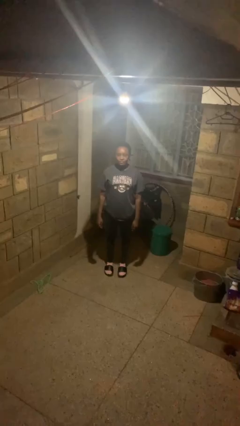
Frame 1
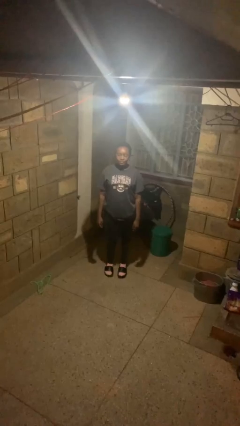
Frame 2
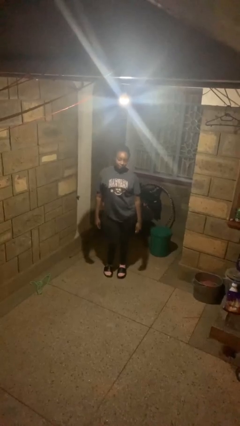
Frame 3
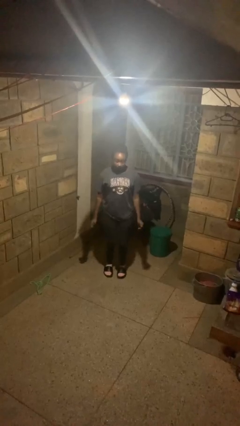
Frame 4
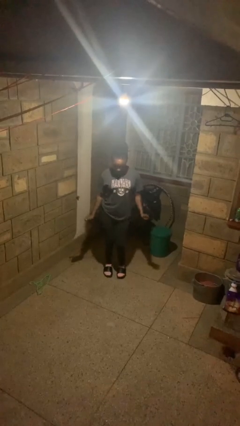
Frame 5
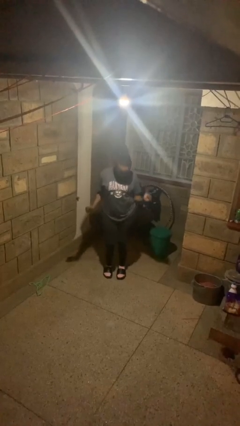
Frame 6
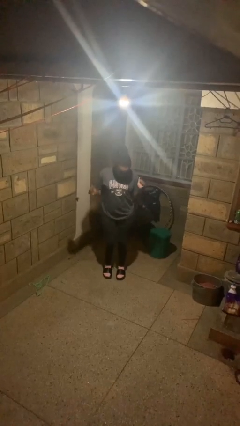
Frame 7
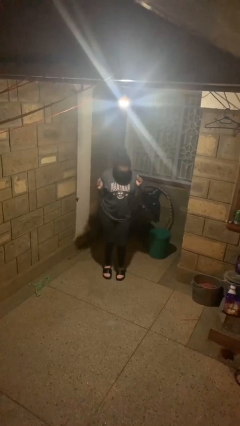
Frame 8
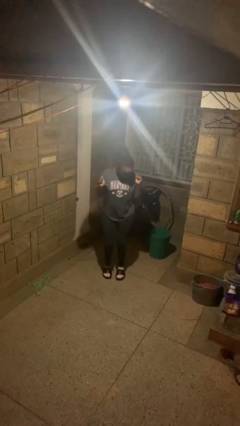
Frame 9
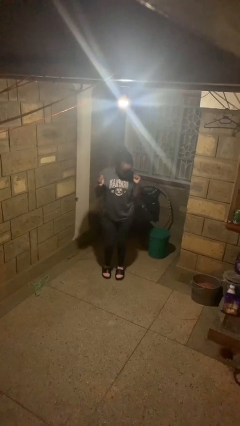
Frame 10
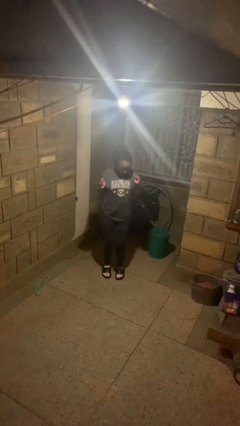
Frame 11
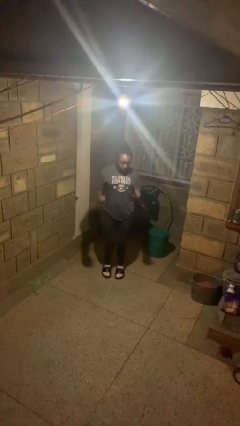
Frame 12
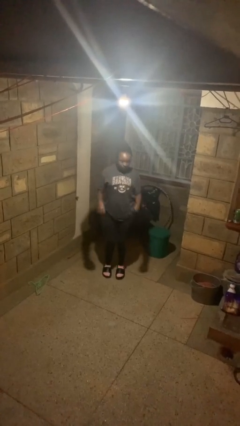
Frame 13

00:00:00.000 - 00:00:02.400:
person wiggles hips

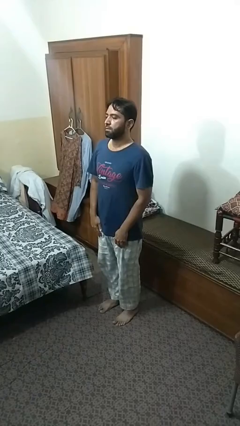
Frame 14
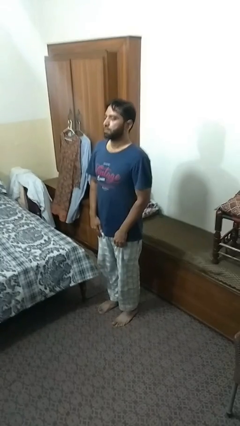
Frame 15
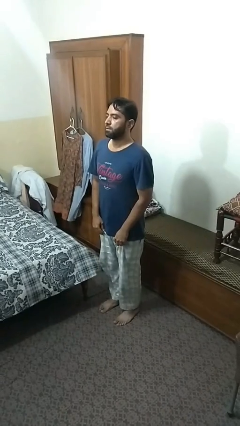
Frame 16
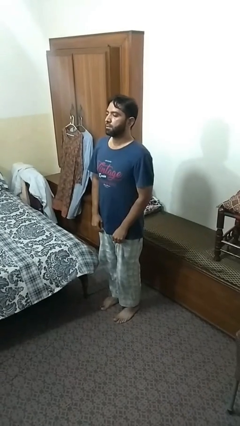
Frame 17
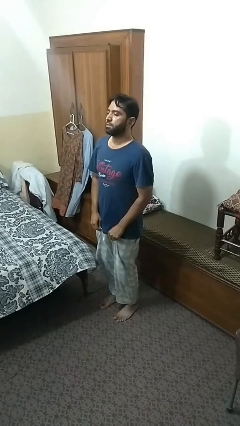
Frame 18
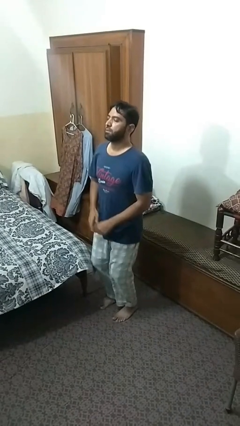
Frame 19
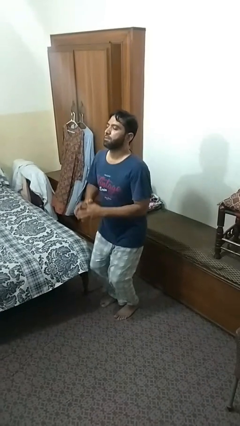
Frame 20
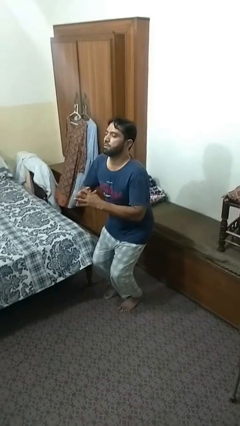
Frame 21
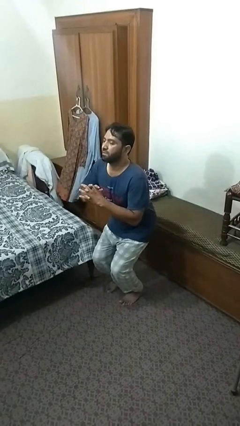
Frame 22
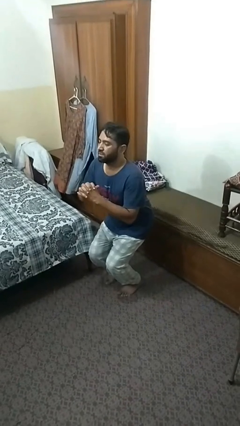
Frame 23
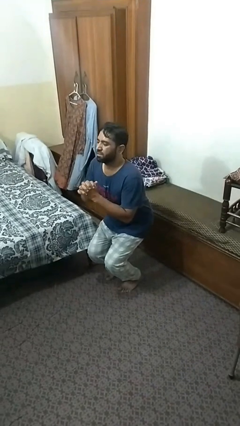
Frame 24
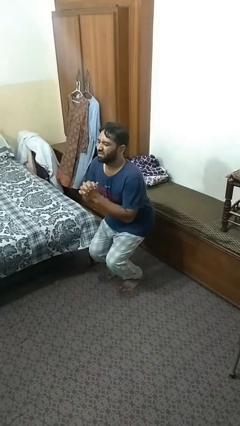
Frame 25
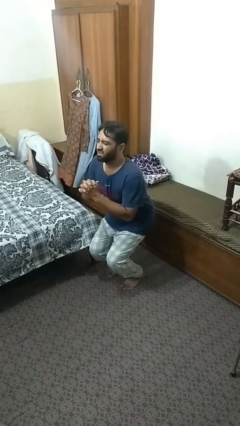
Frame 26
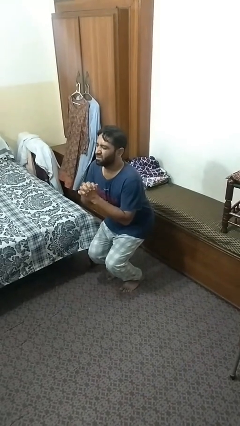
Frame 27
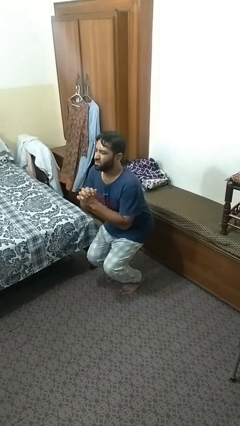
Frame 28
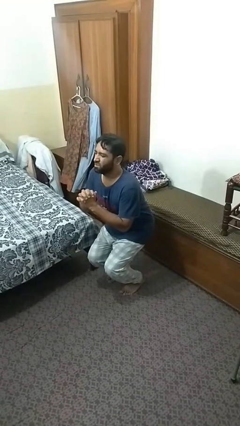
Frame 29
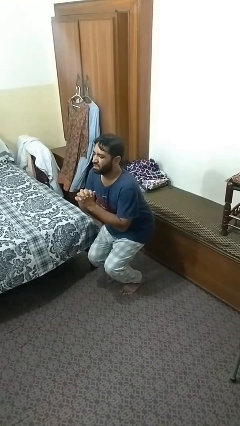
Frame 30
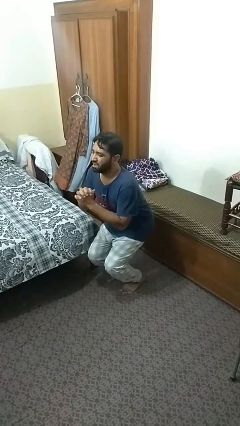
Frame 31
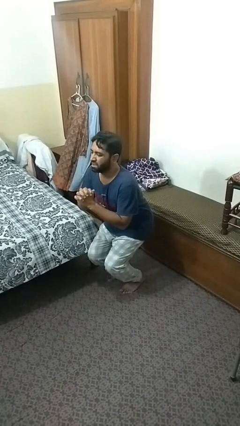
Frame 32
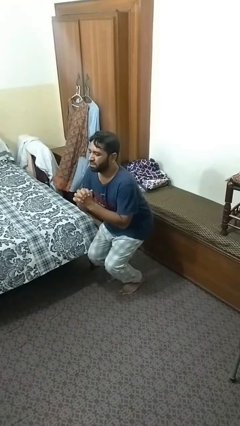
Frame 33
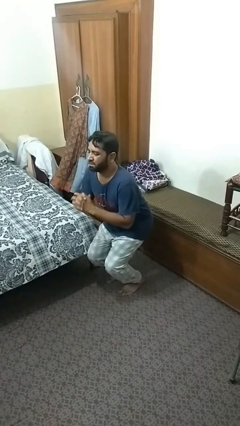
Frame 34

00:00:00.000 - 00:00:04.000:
person squats

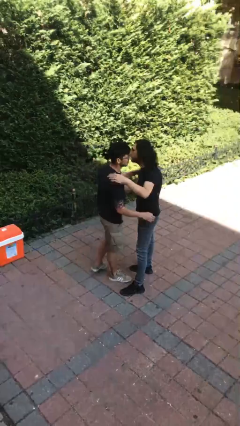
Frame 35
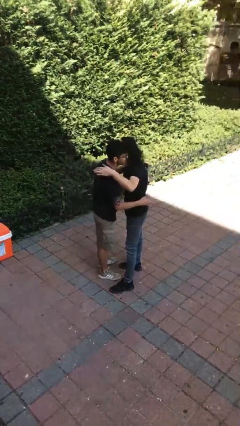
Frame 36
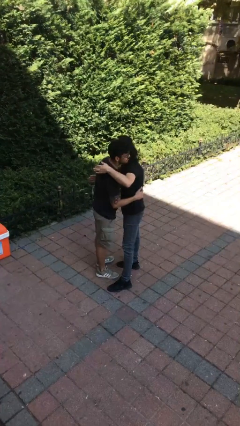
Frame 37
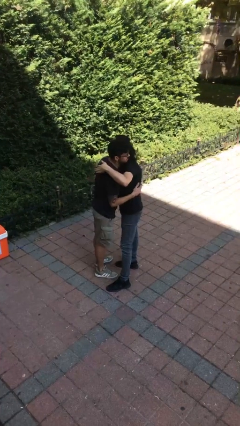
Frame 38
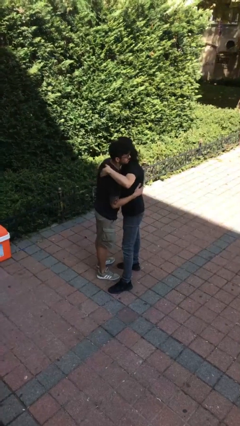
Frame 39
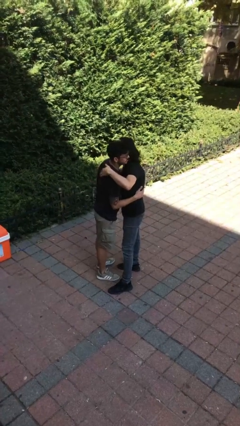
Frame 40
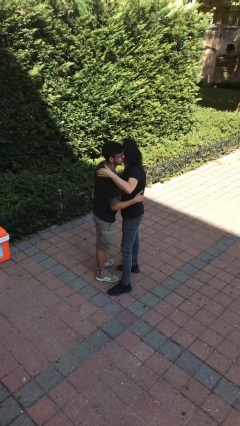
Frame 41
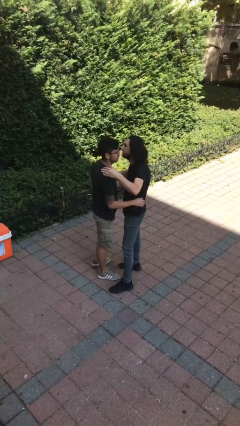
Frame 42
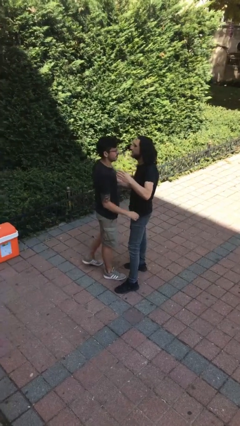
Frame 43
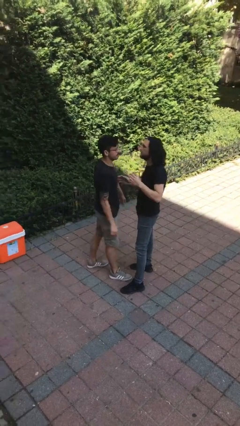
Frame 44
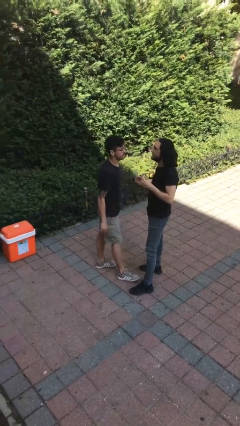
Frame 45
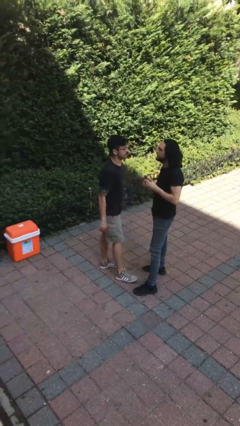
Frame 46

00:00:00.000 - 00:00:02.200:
person embraces person

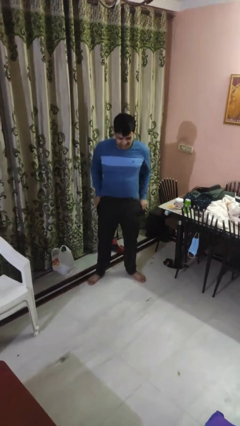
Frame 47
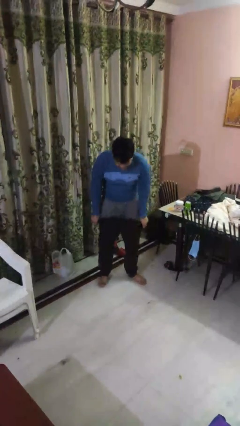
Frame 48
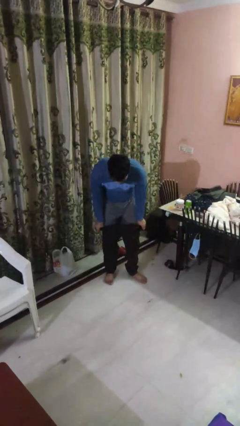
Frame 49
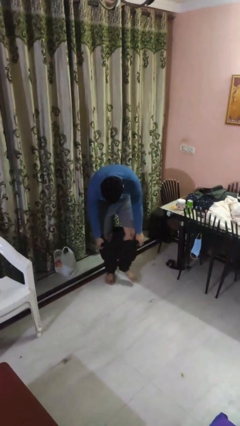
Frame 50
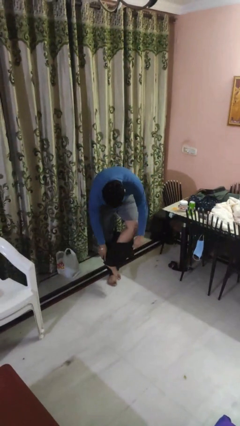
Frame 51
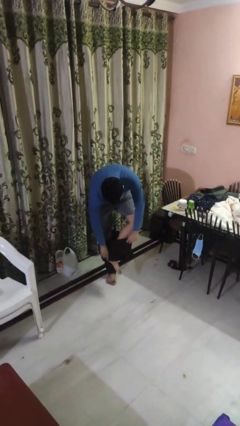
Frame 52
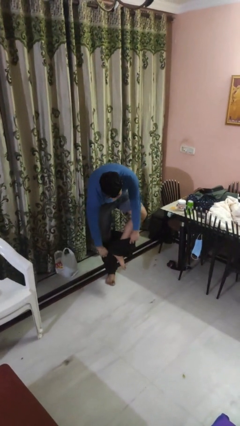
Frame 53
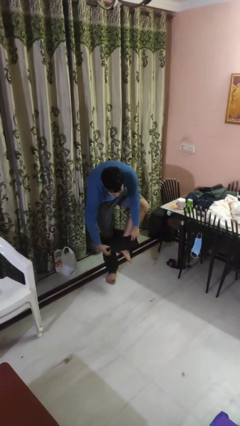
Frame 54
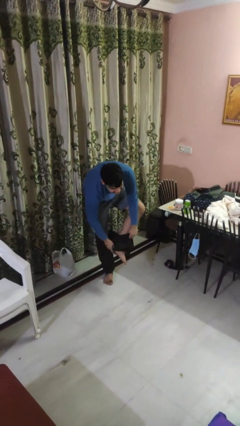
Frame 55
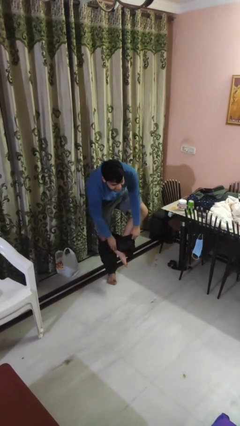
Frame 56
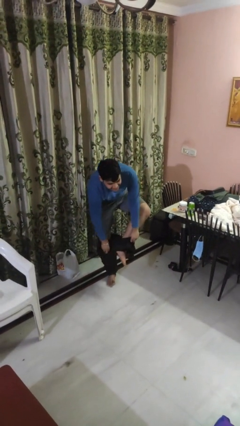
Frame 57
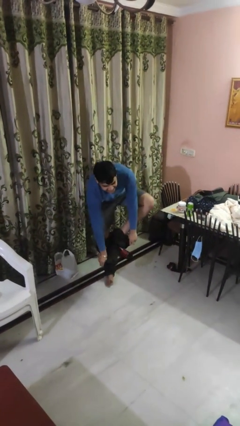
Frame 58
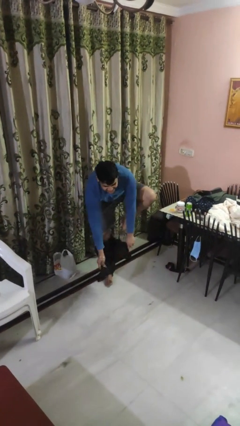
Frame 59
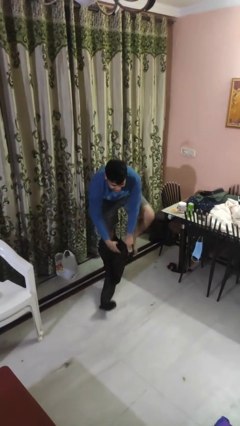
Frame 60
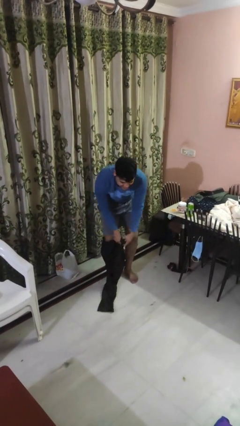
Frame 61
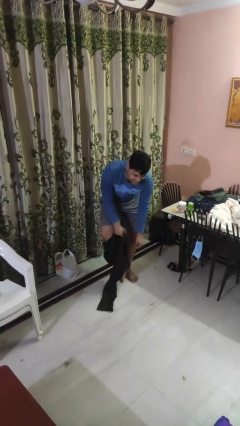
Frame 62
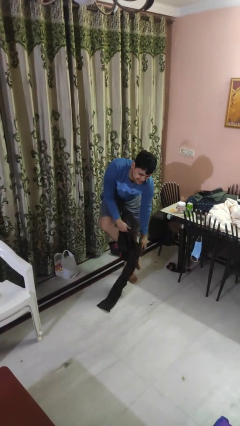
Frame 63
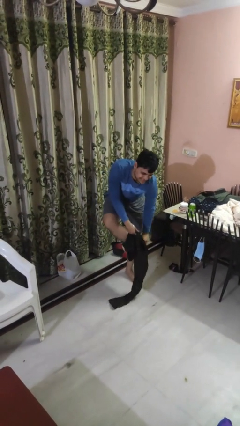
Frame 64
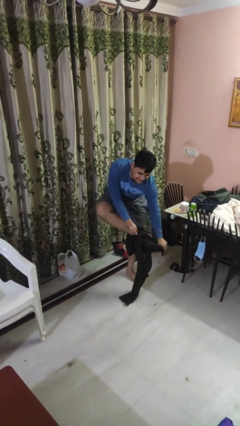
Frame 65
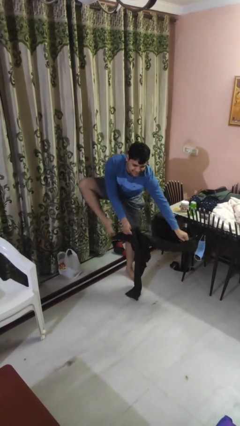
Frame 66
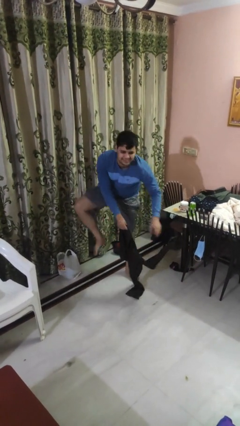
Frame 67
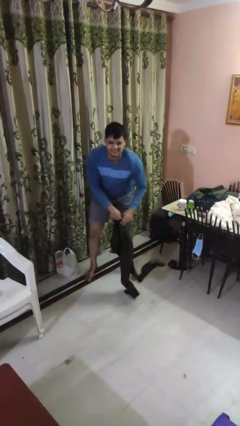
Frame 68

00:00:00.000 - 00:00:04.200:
person takes off pants

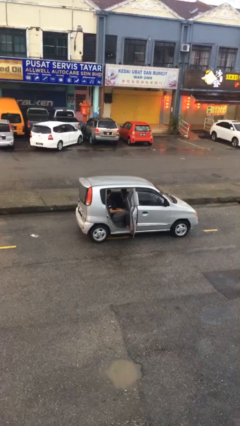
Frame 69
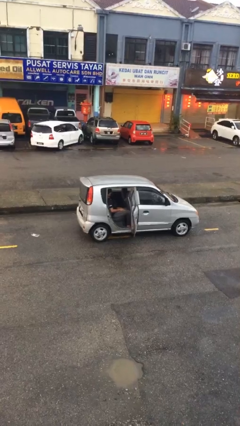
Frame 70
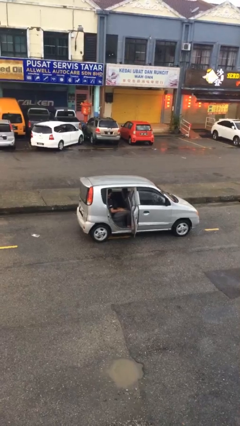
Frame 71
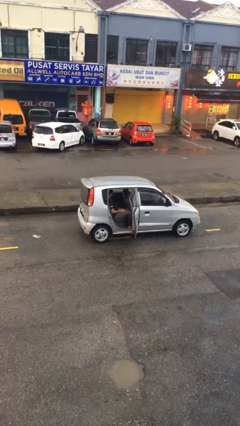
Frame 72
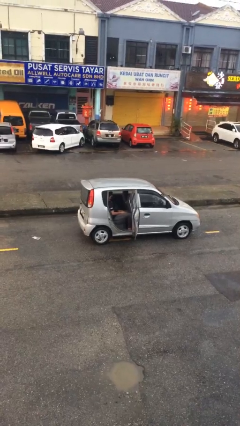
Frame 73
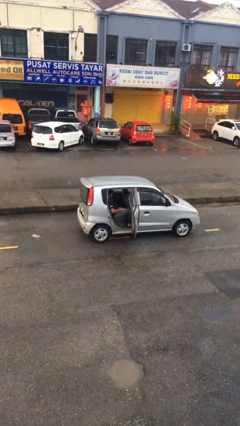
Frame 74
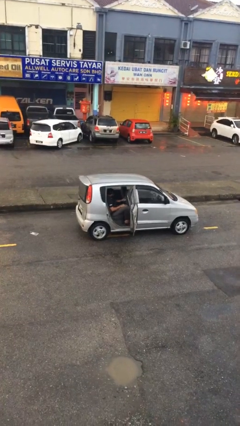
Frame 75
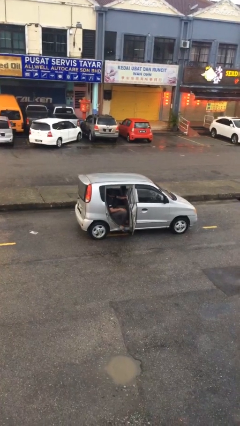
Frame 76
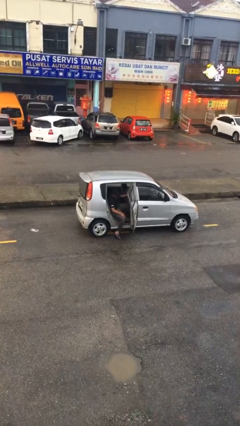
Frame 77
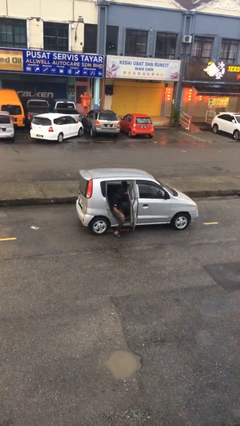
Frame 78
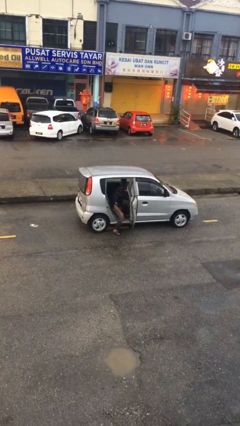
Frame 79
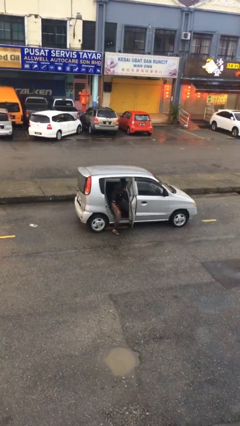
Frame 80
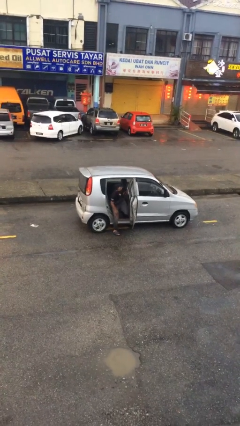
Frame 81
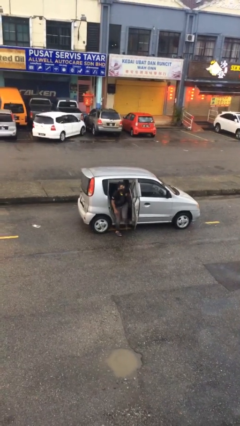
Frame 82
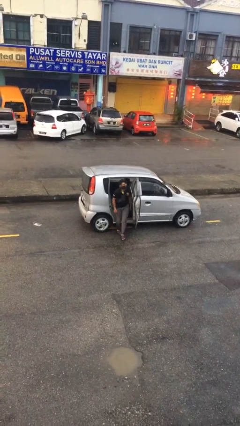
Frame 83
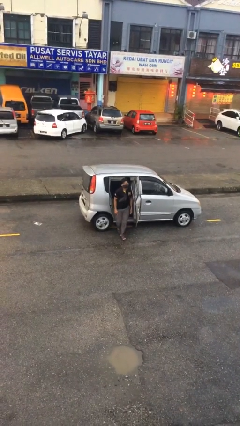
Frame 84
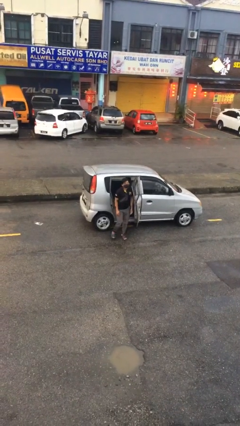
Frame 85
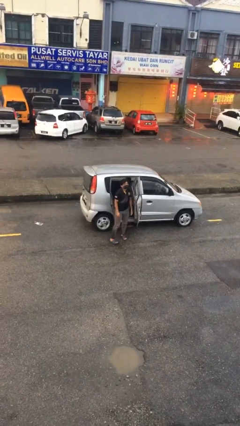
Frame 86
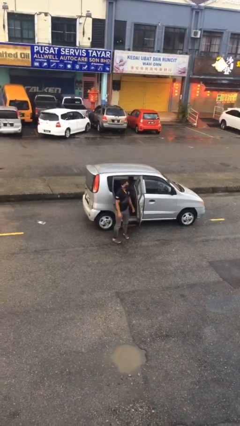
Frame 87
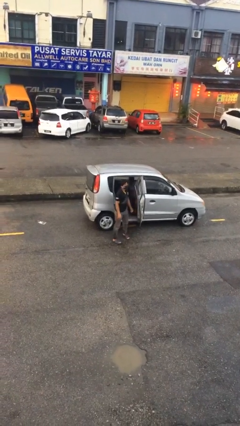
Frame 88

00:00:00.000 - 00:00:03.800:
person exits car

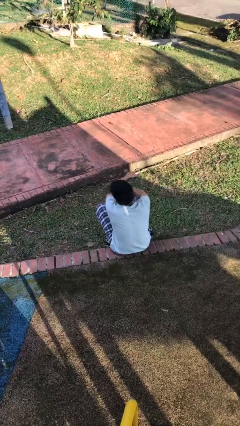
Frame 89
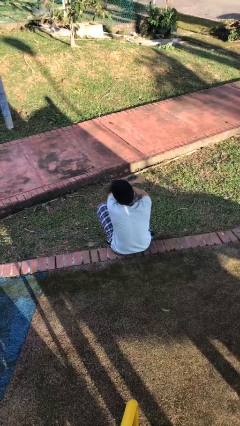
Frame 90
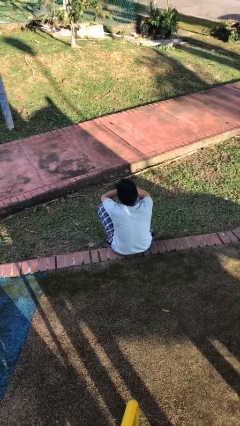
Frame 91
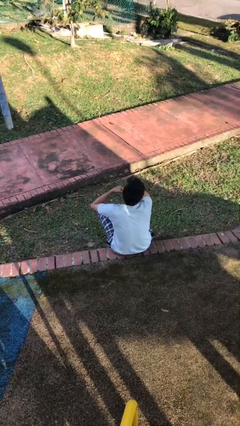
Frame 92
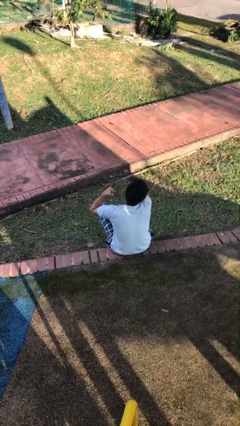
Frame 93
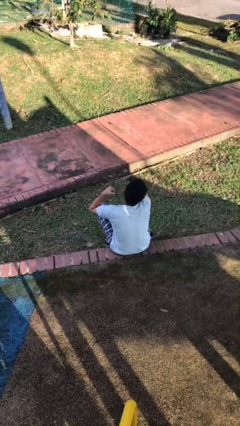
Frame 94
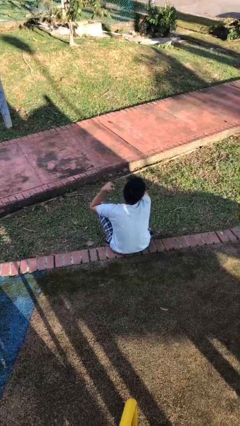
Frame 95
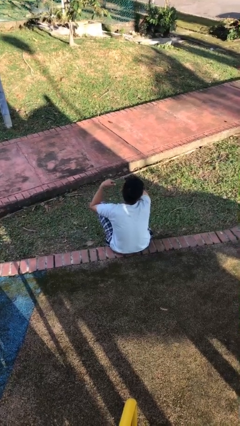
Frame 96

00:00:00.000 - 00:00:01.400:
person gestures cut
